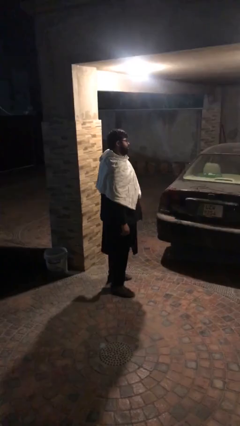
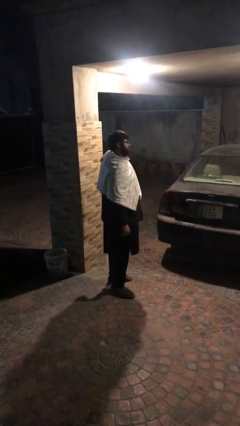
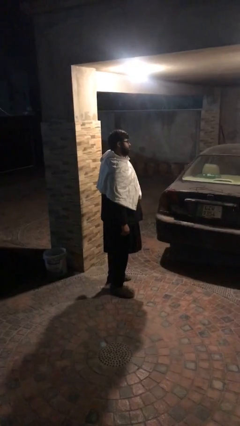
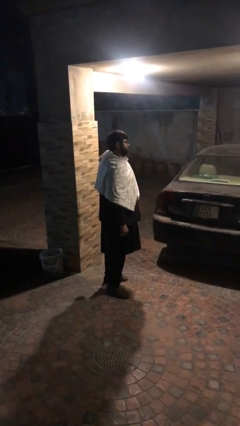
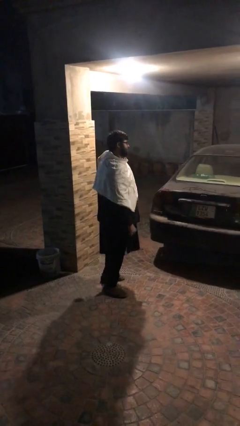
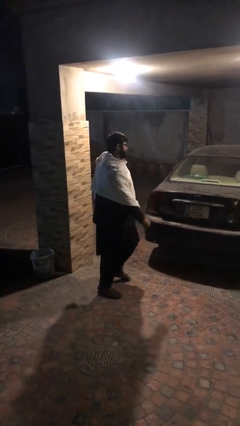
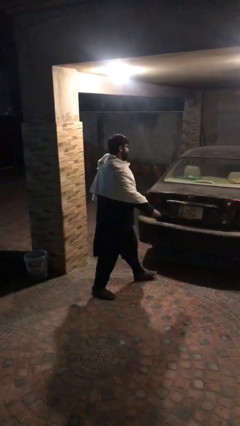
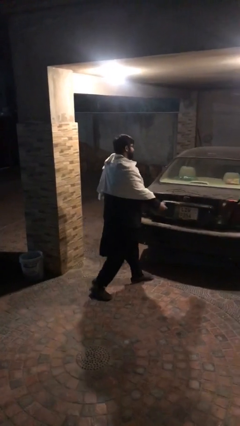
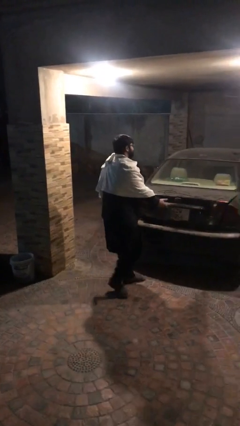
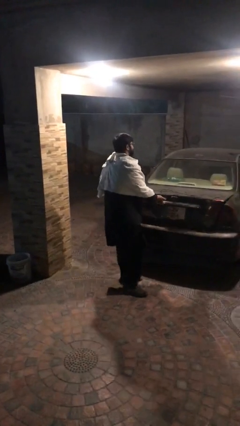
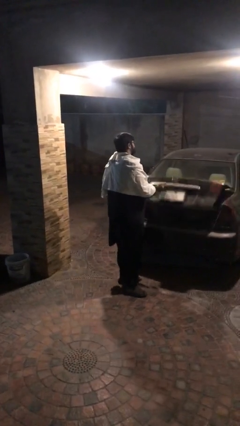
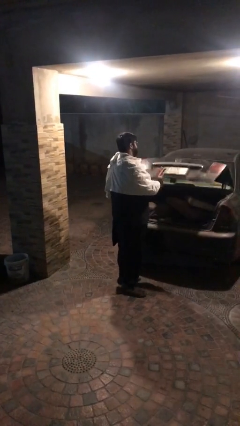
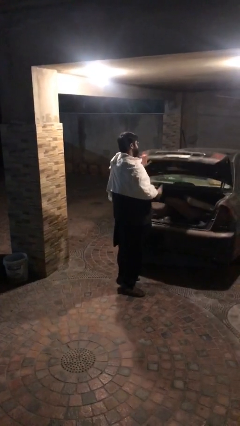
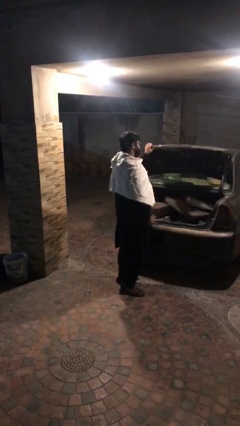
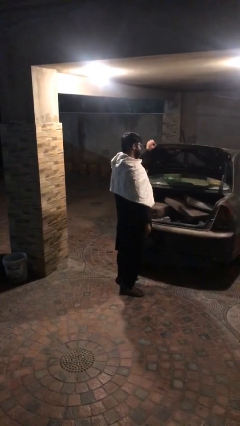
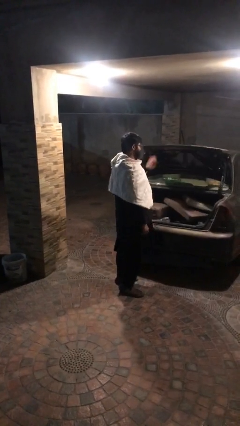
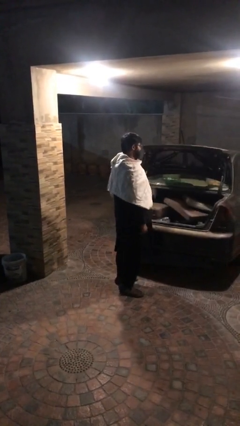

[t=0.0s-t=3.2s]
person opens car trunk

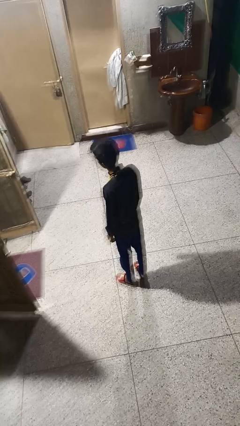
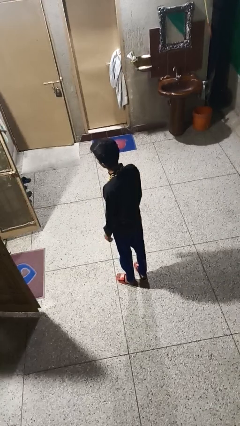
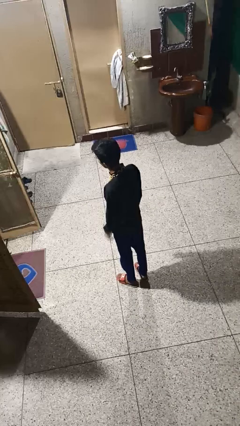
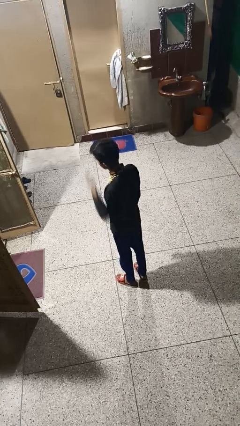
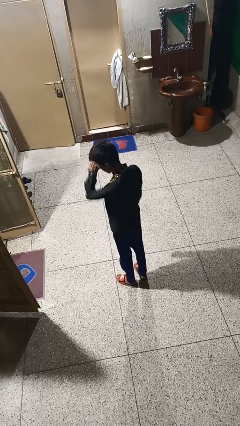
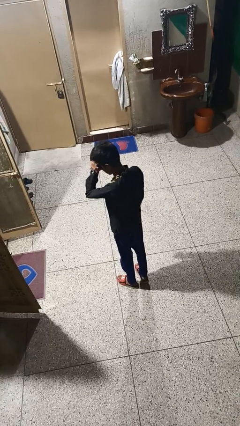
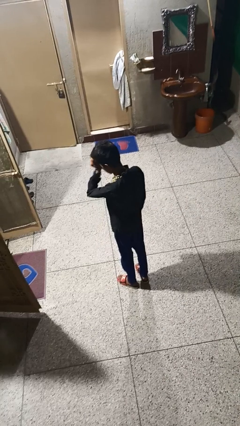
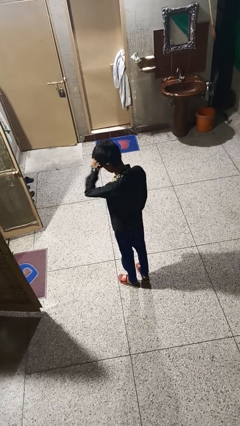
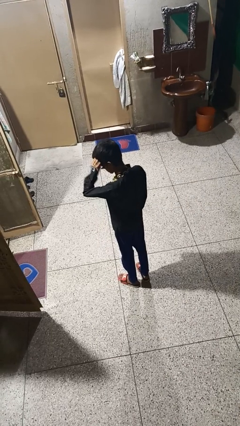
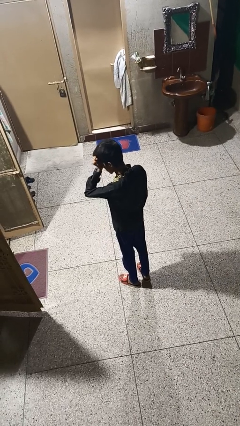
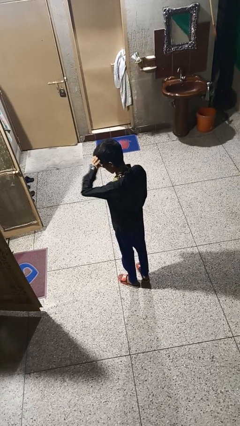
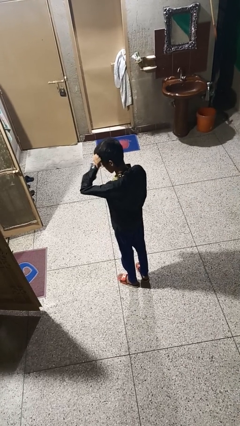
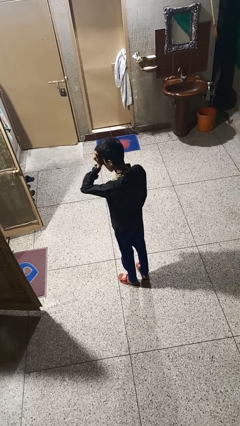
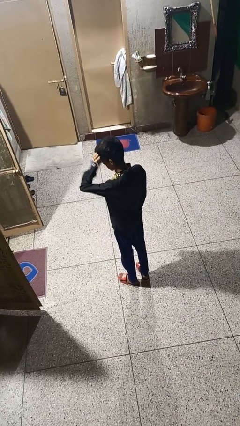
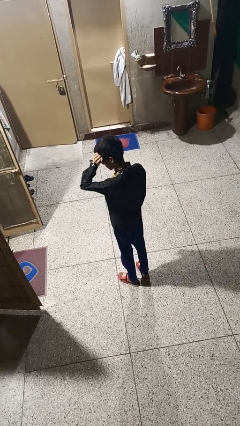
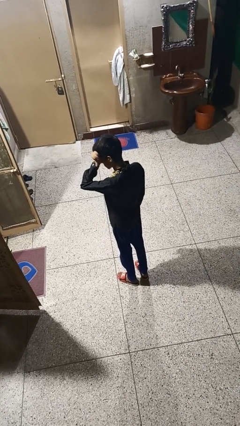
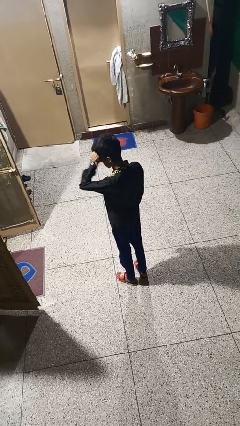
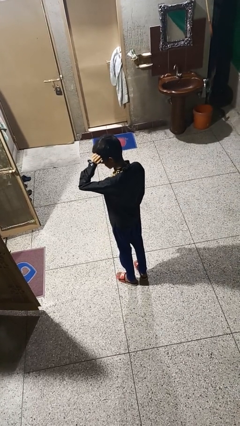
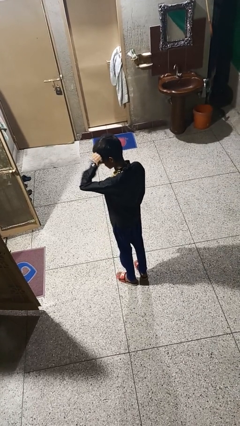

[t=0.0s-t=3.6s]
person rubs eyes

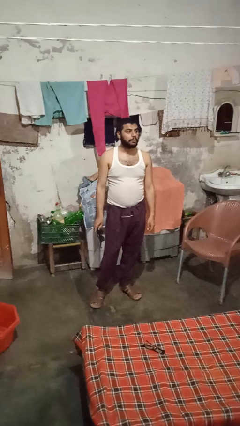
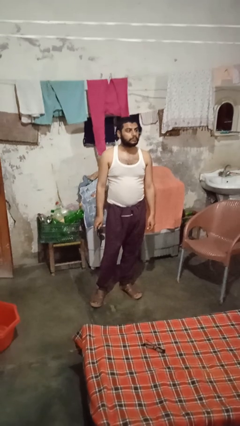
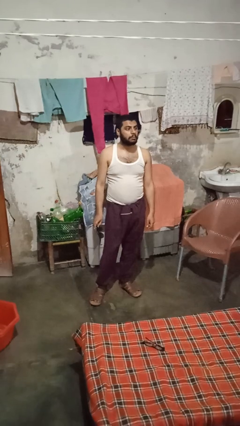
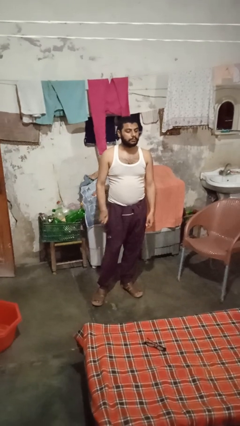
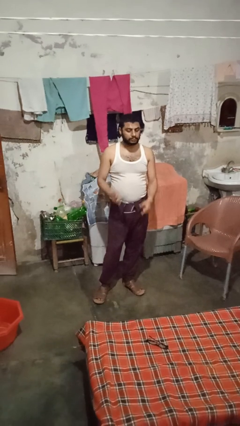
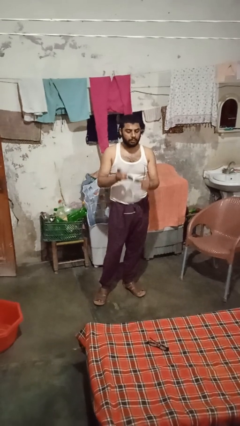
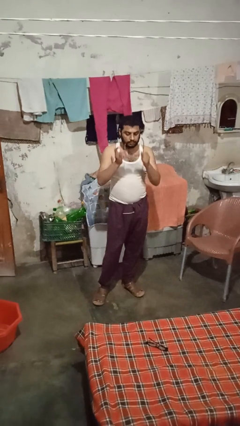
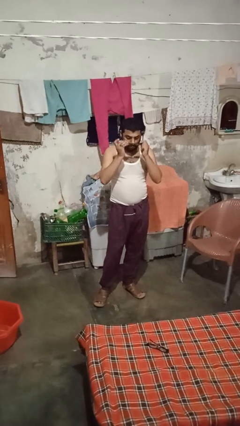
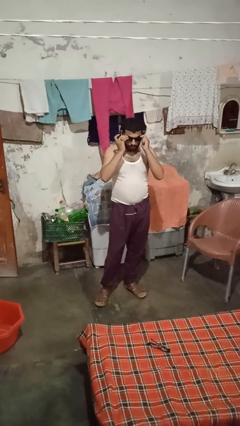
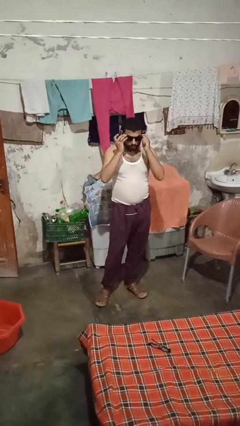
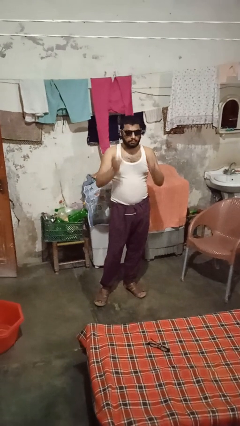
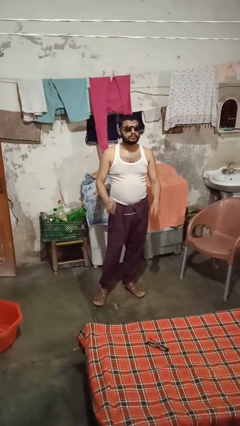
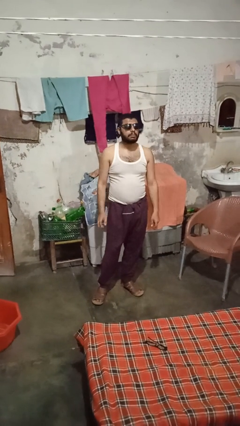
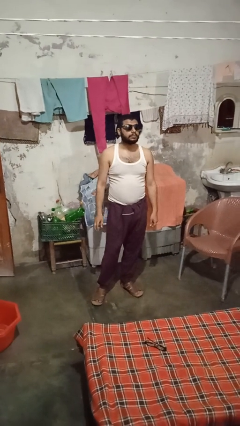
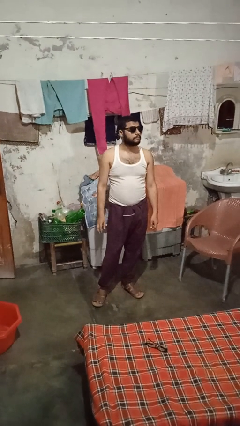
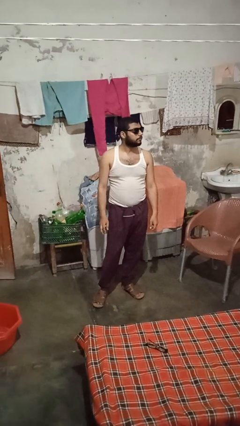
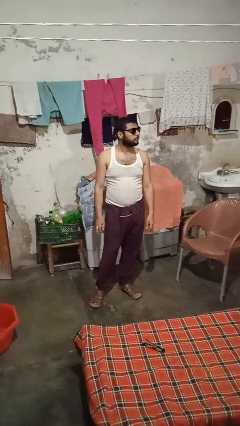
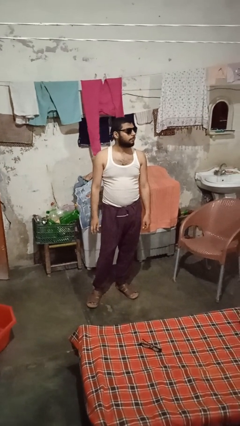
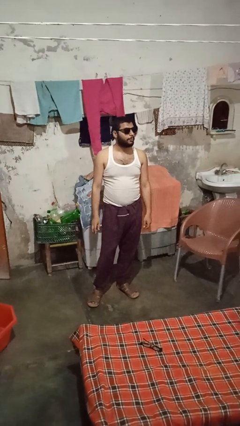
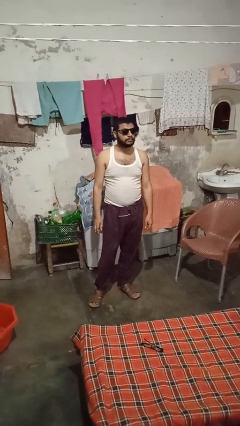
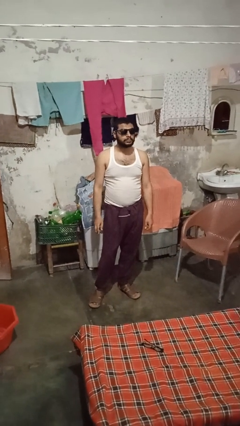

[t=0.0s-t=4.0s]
person puts on sunglasses

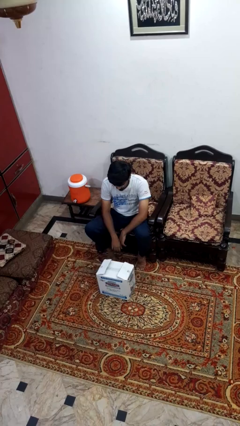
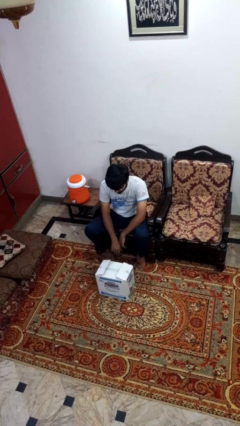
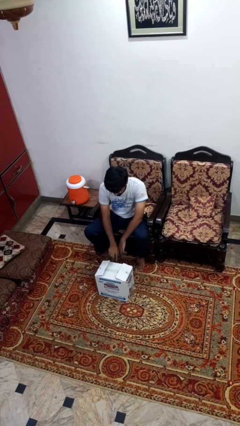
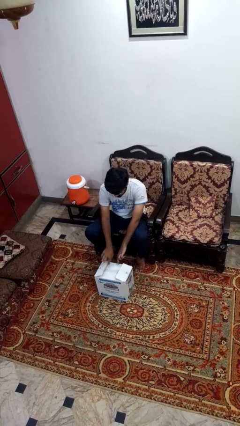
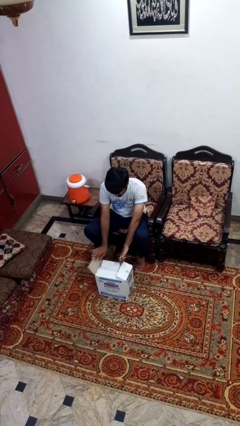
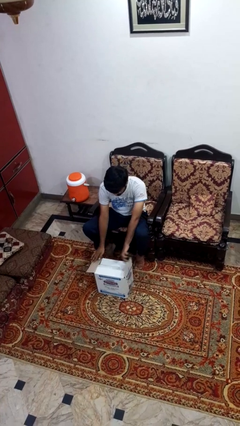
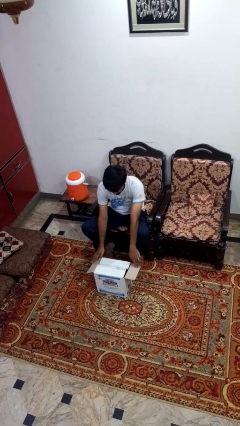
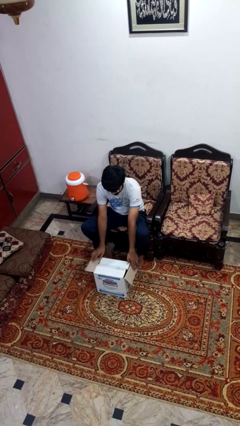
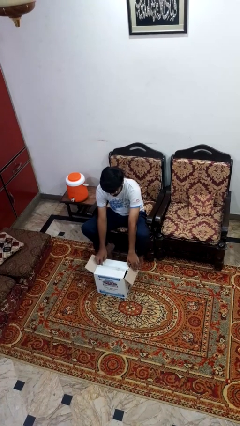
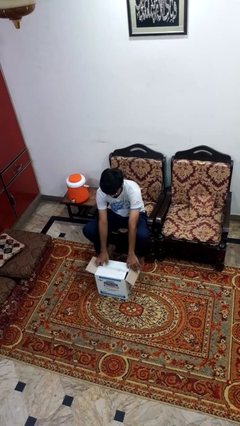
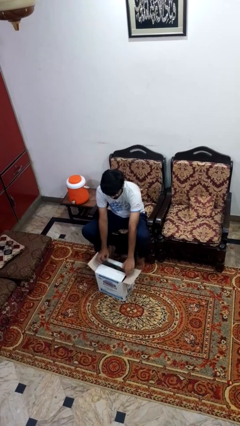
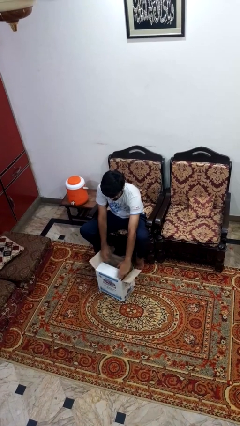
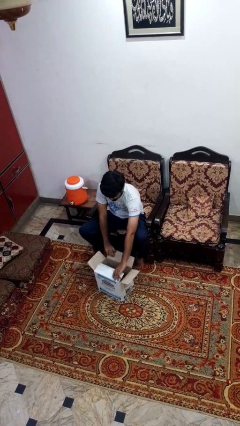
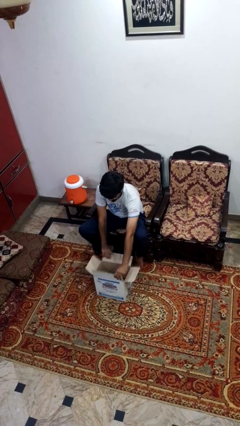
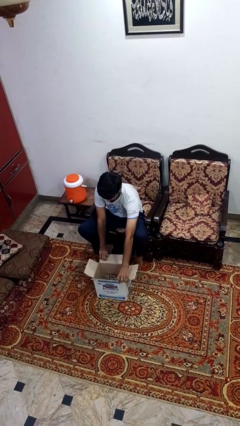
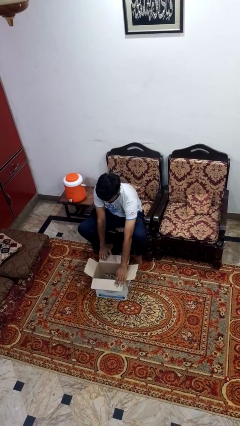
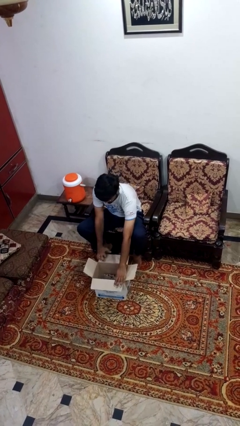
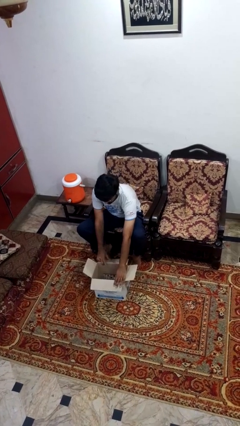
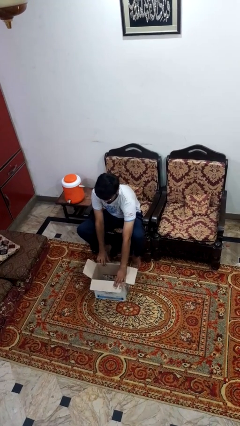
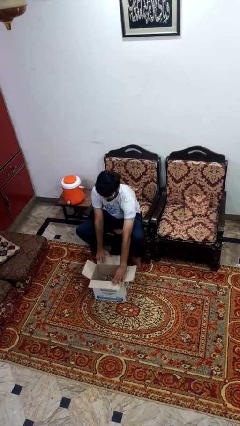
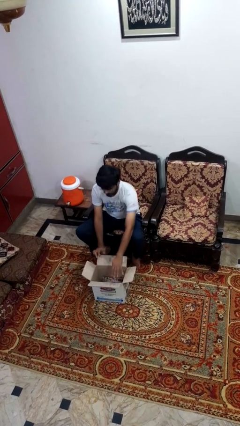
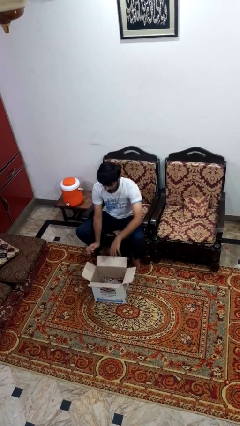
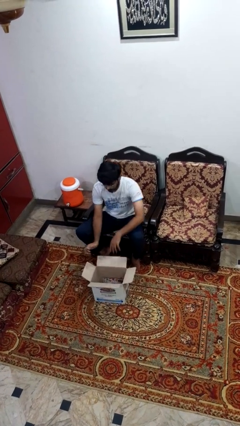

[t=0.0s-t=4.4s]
person opens box

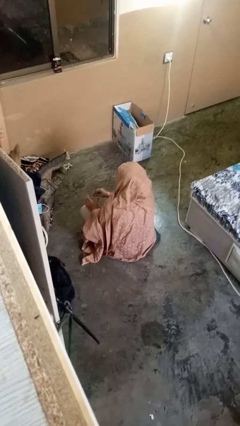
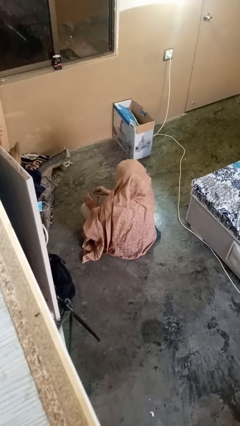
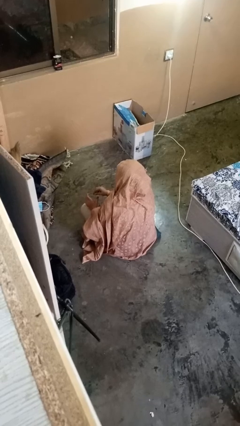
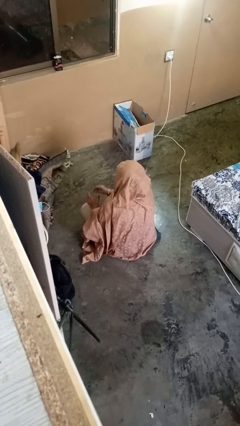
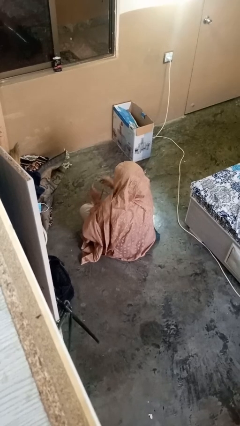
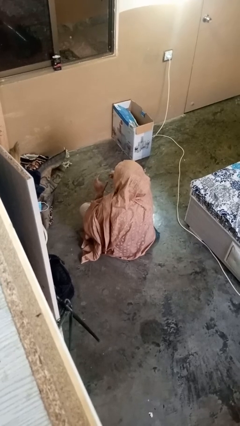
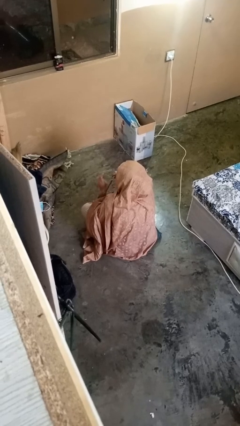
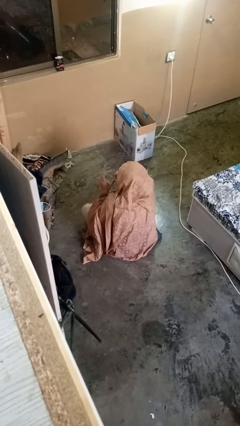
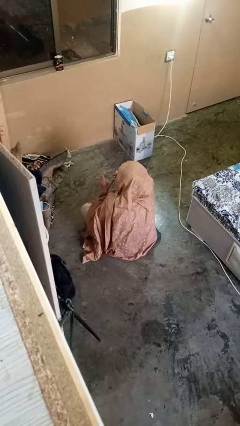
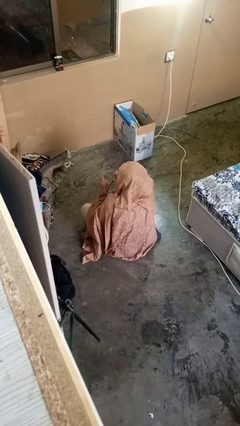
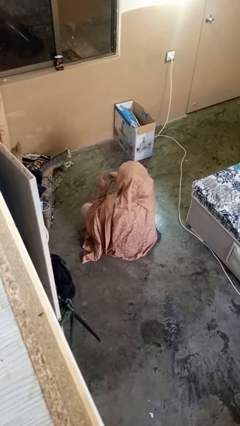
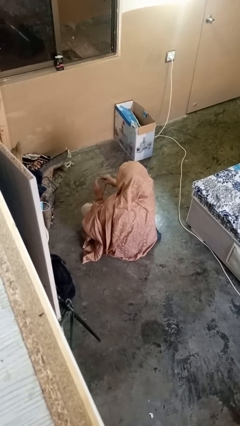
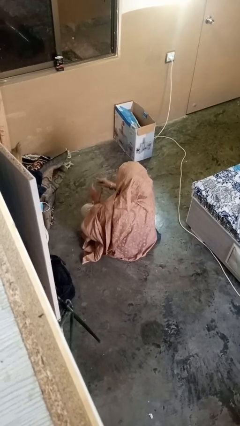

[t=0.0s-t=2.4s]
person drinks from straw

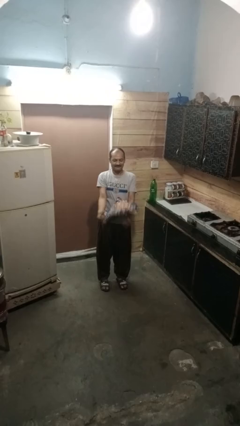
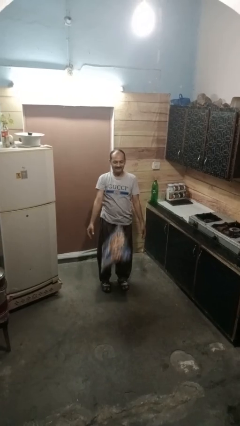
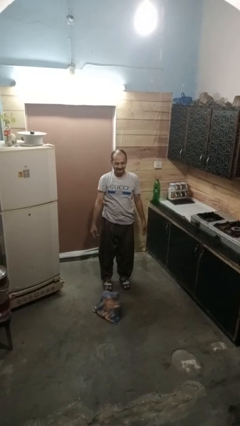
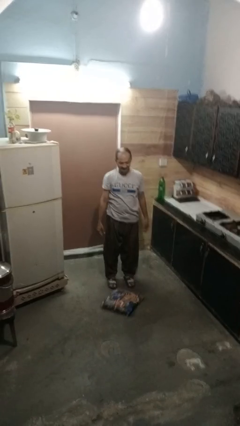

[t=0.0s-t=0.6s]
person catches dropped object
